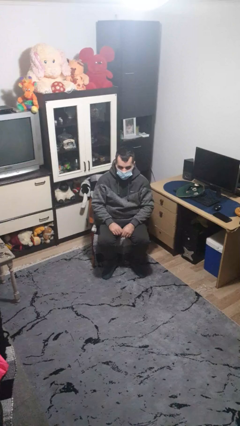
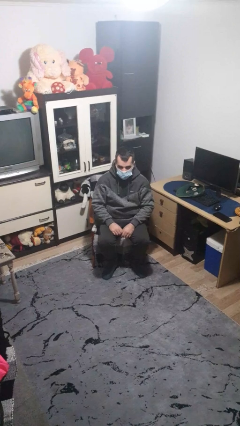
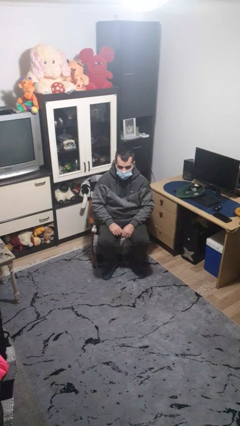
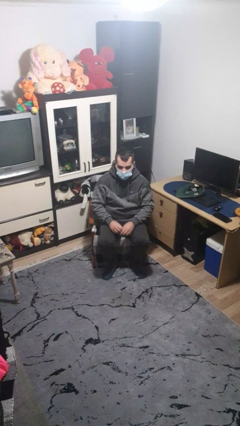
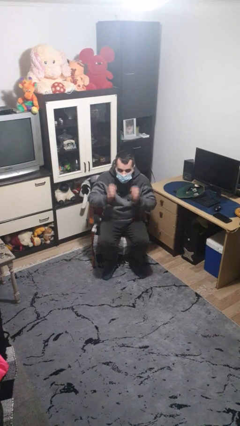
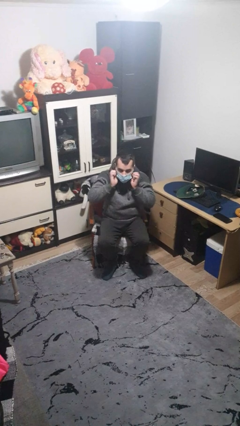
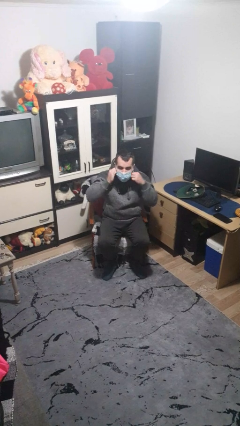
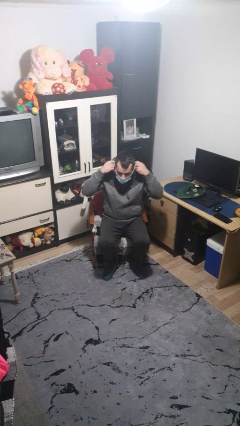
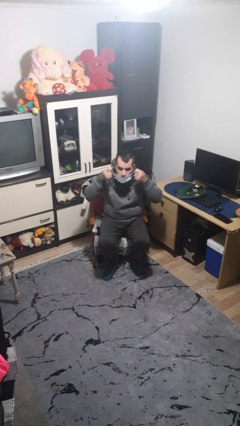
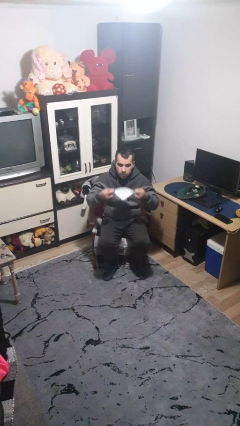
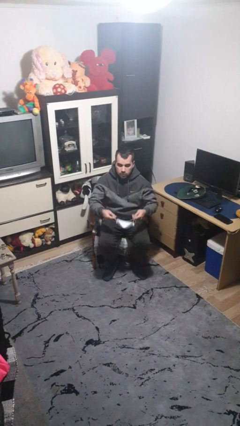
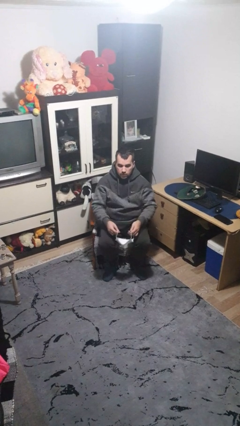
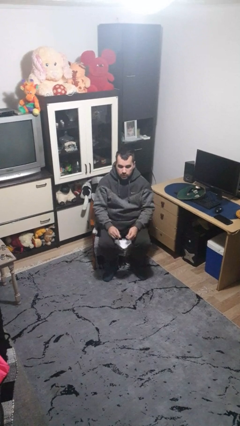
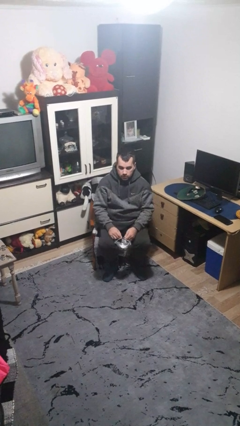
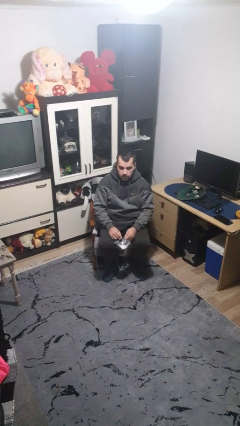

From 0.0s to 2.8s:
person takes off facemask

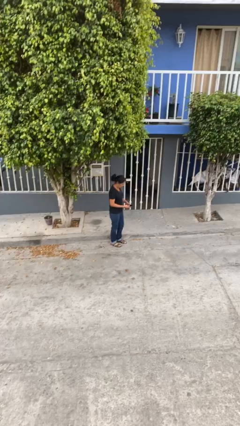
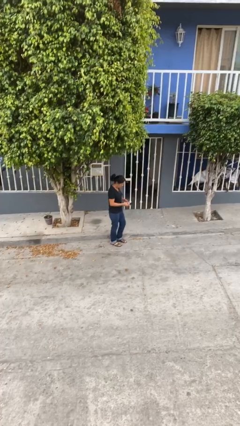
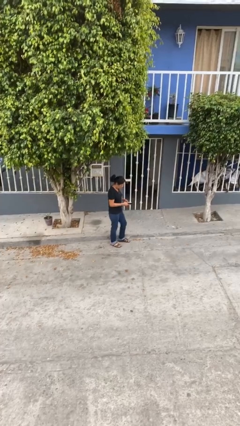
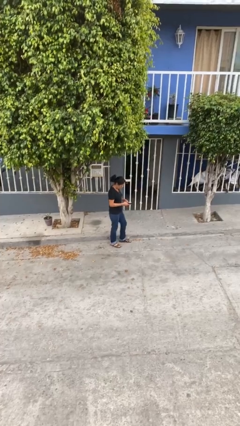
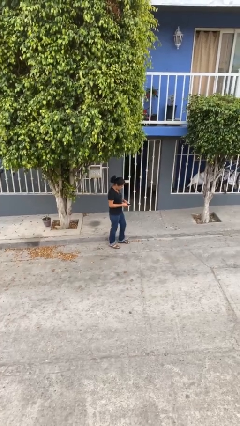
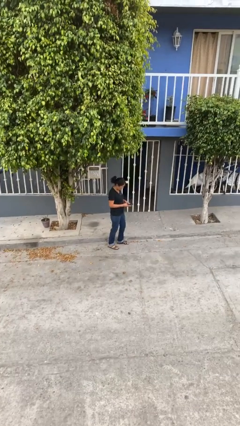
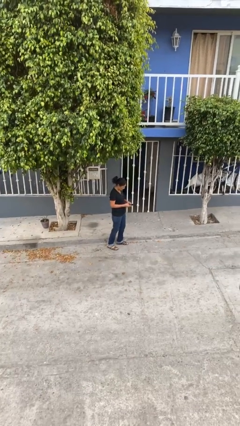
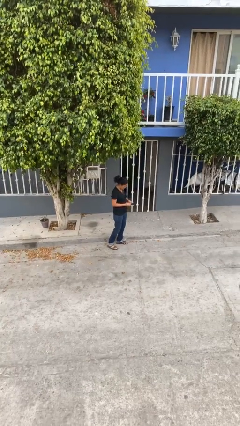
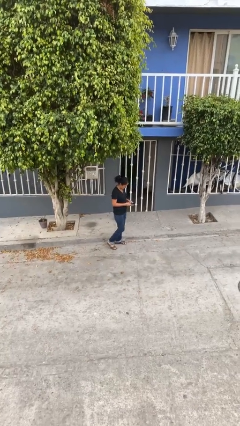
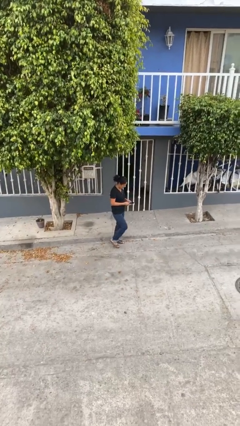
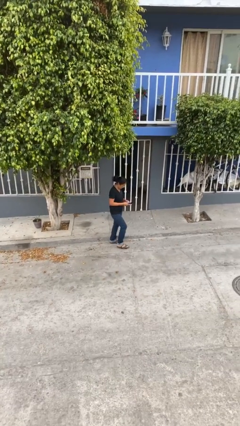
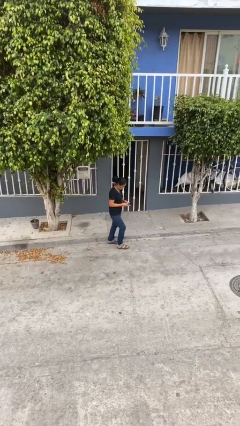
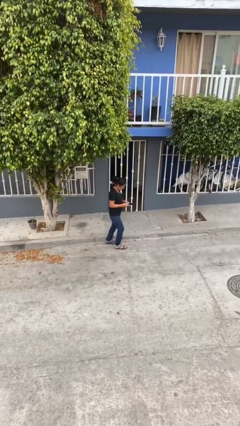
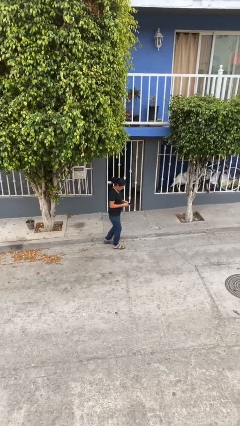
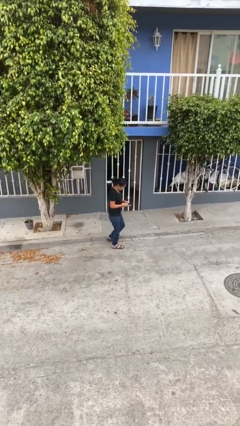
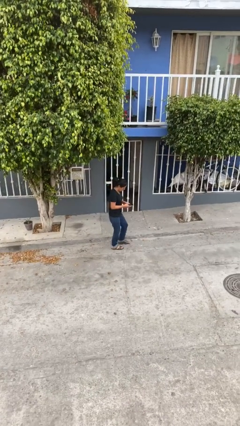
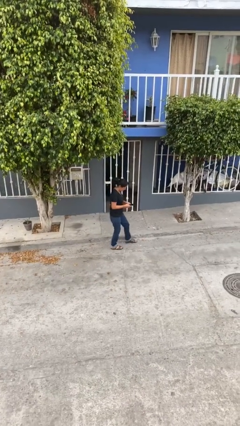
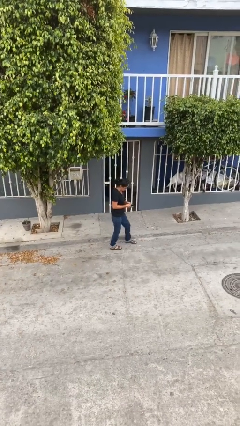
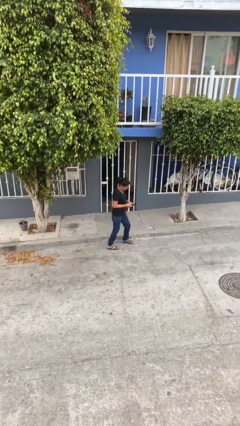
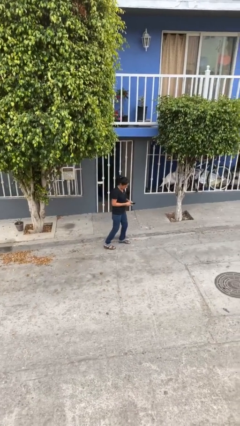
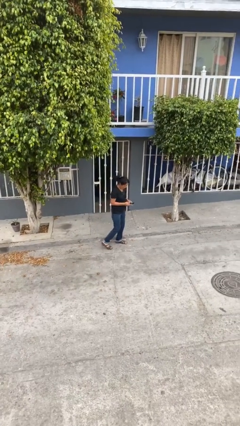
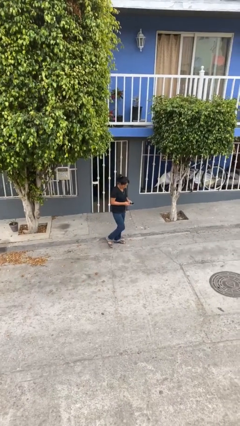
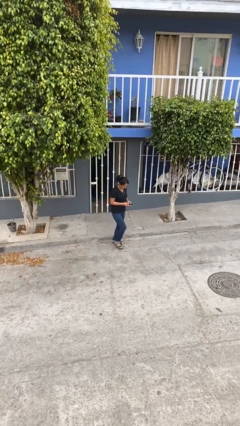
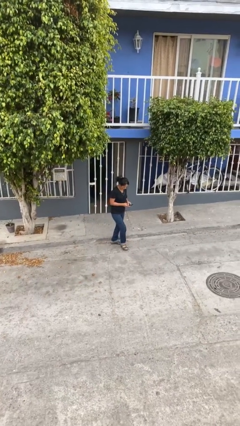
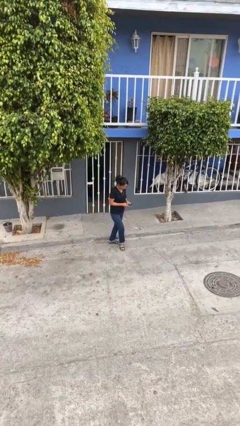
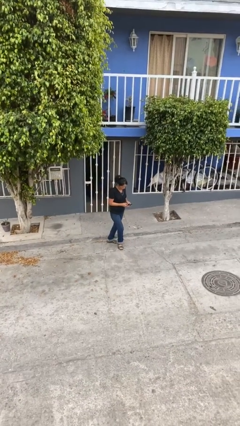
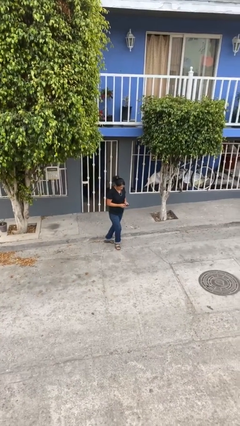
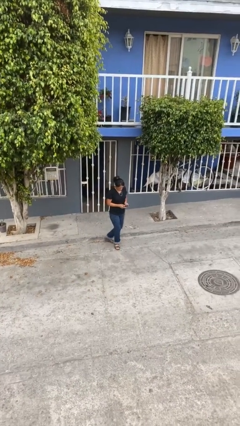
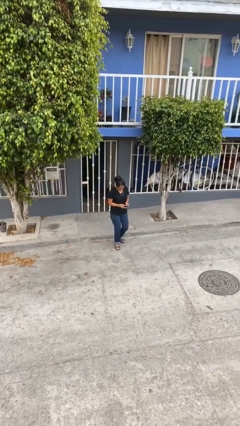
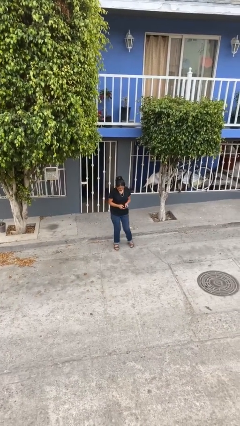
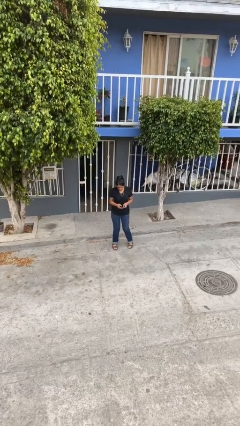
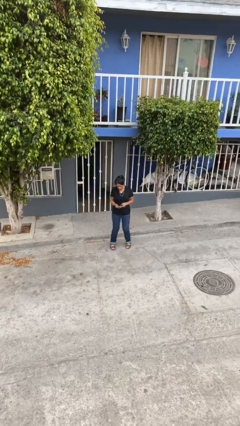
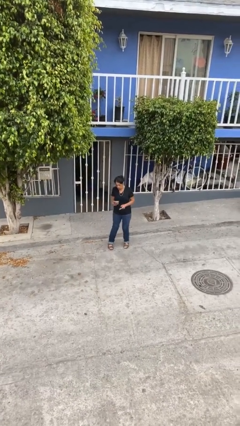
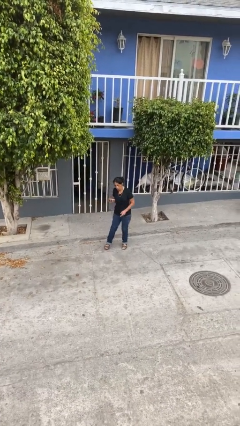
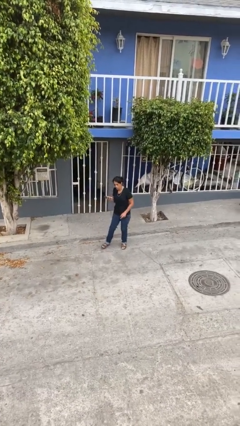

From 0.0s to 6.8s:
person texts on phone

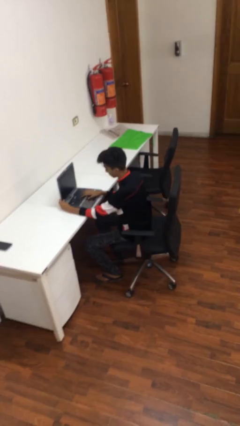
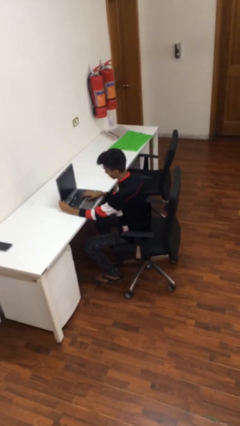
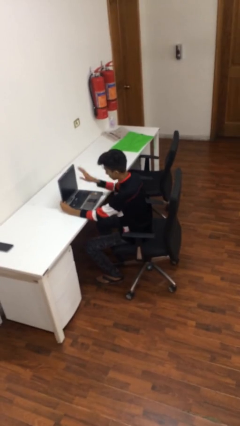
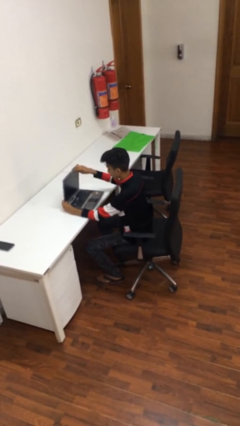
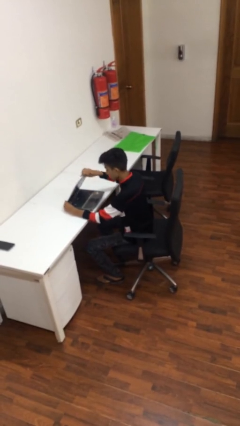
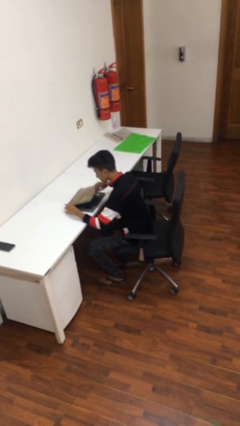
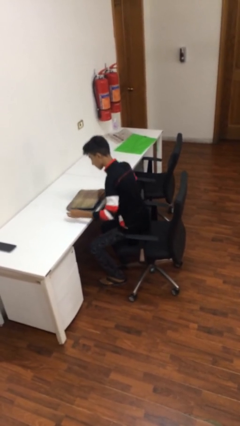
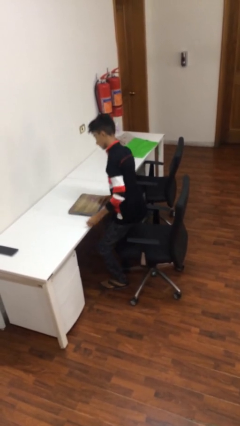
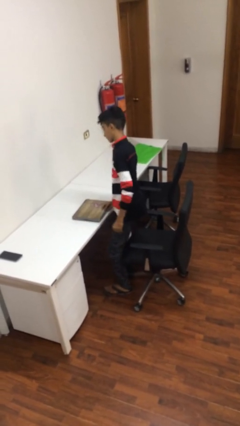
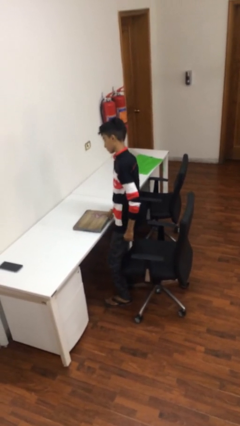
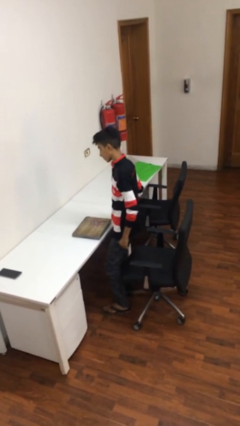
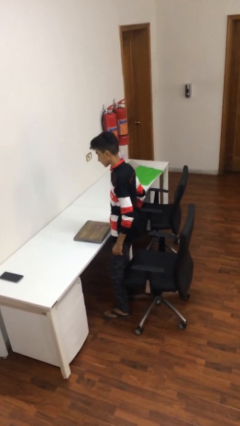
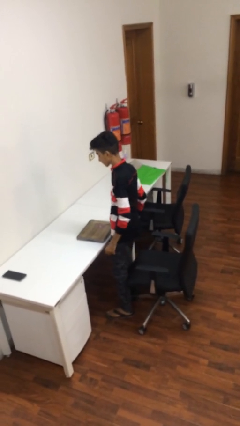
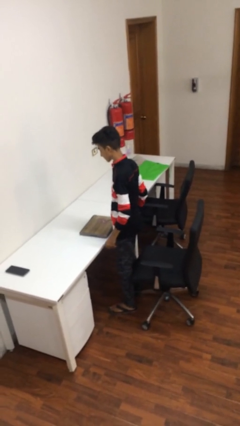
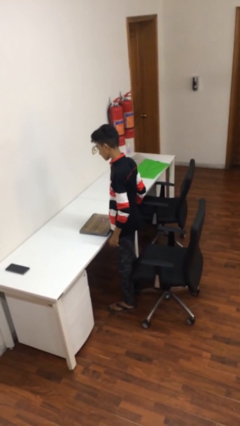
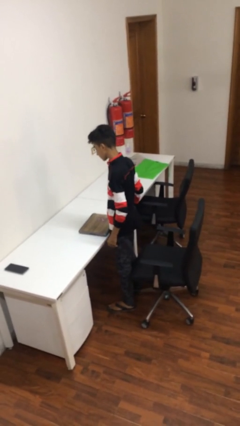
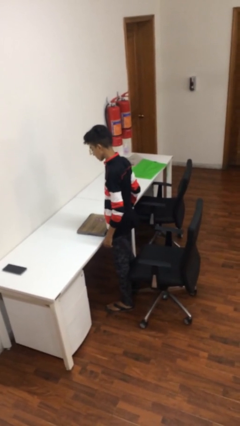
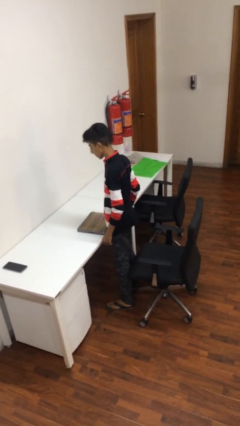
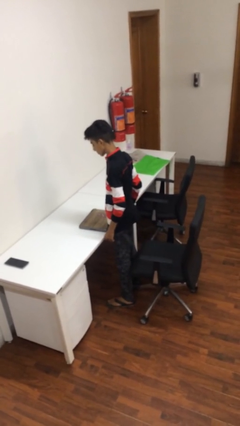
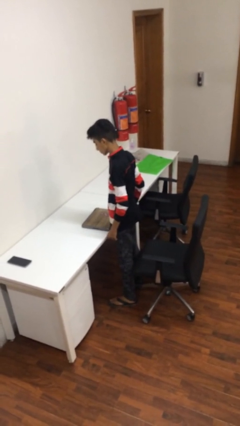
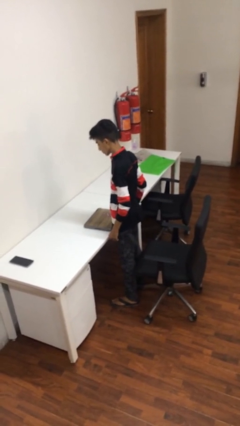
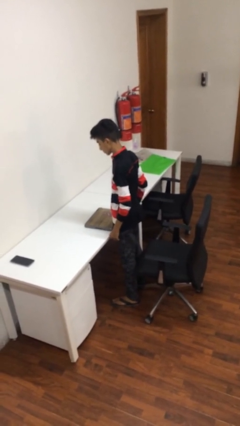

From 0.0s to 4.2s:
person stands up

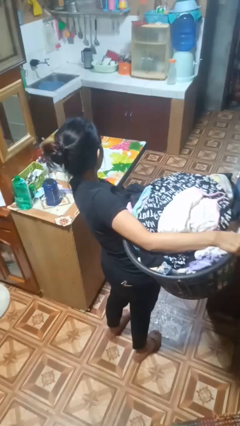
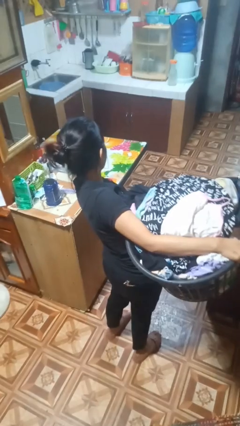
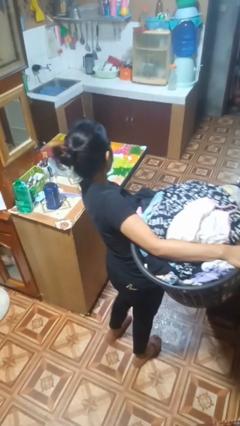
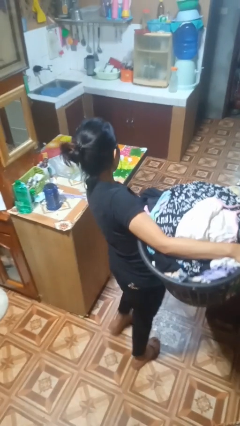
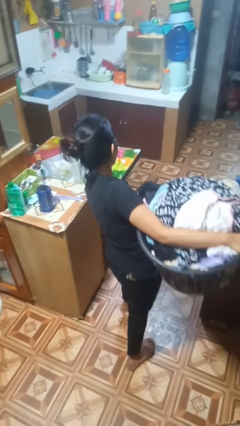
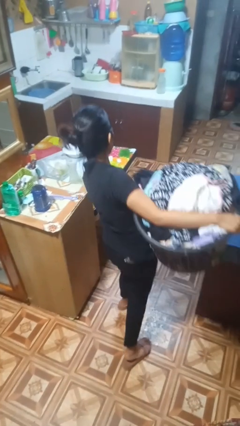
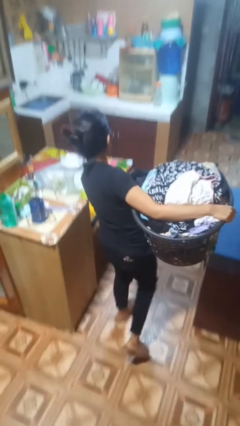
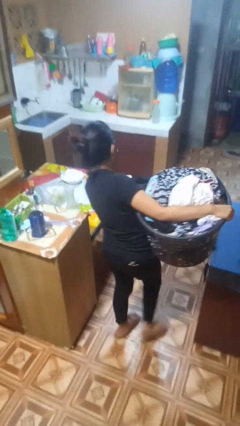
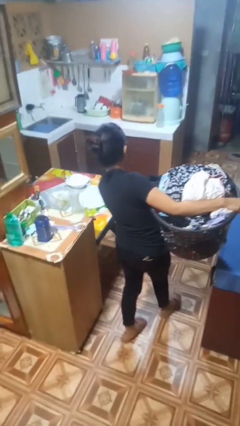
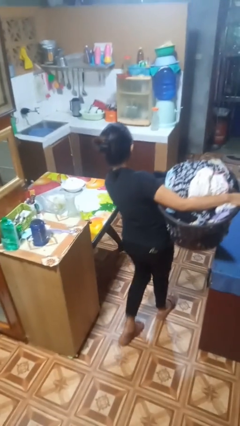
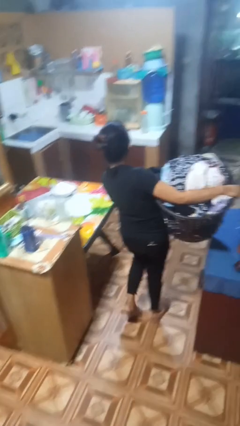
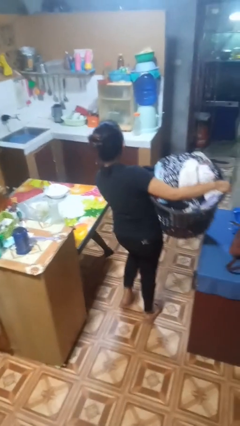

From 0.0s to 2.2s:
person carries laundry basket

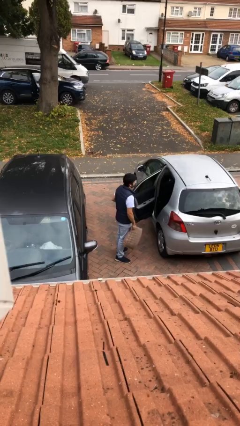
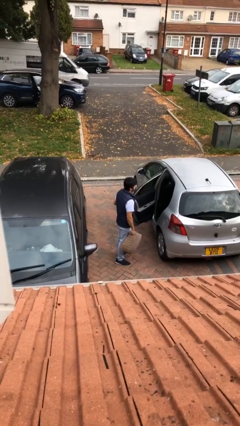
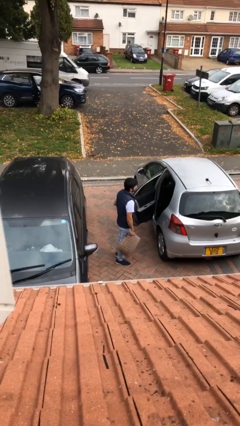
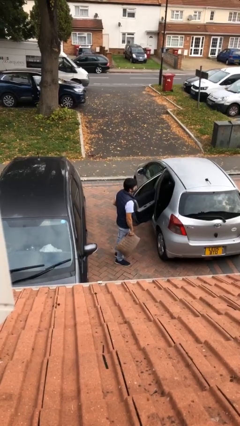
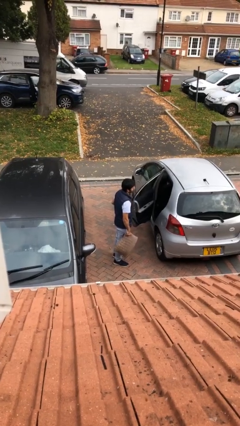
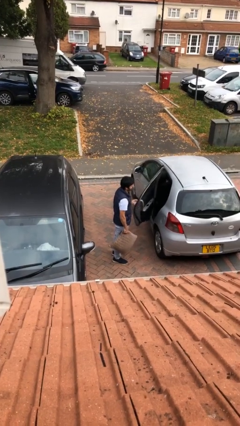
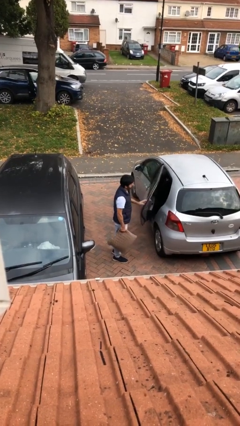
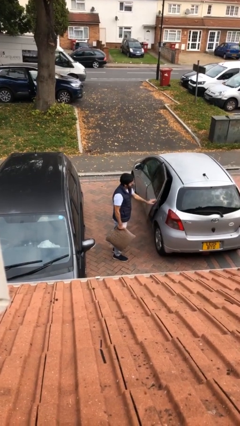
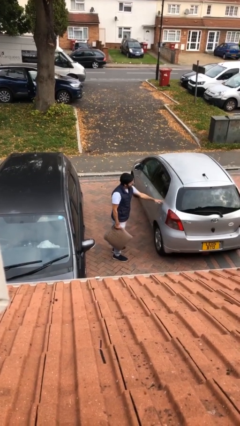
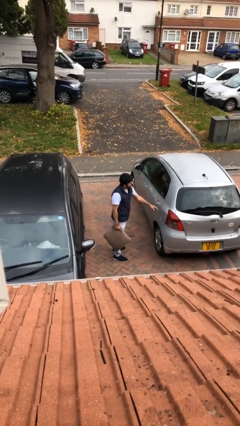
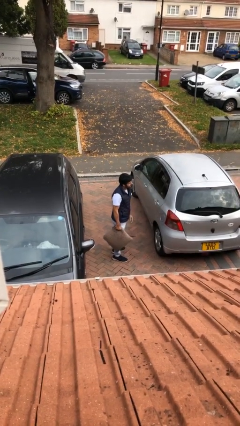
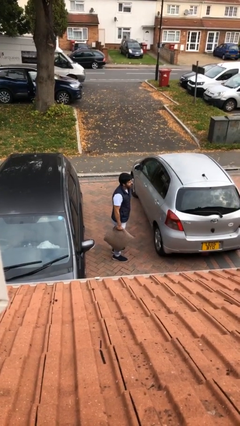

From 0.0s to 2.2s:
person closes car door
